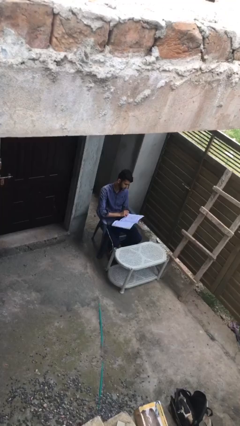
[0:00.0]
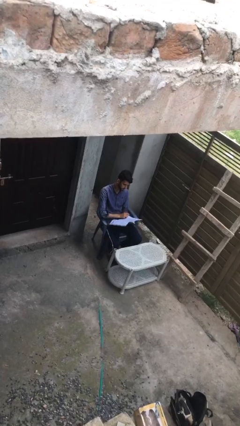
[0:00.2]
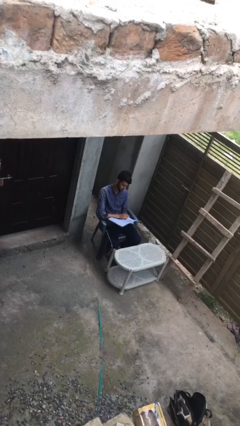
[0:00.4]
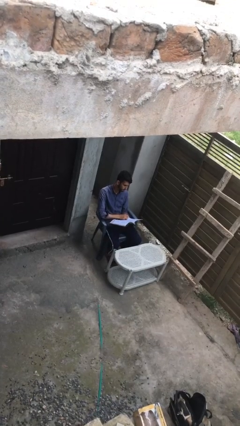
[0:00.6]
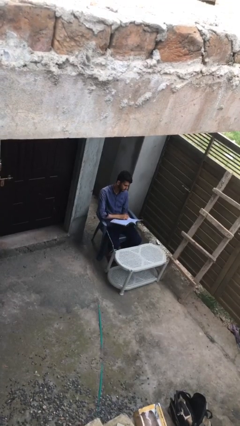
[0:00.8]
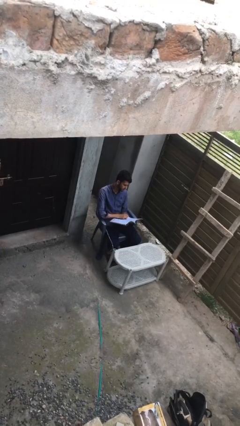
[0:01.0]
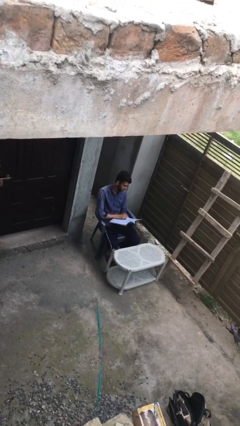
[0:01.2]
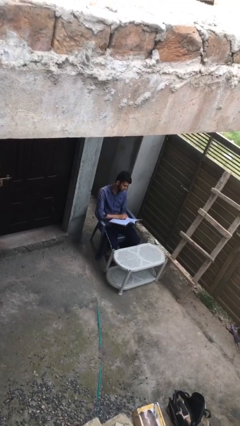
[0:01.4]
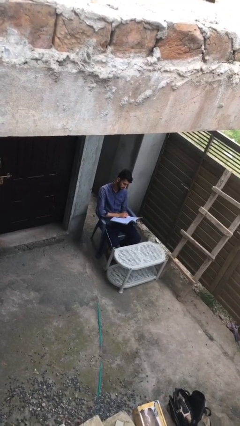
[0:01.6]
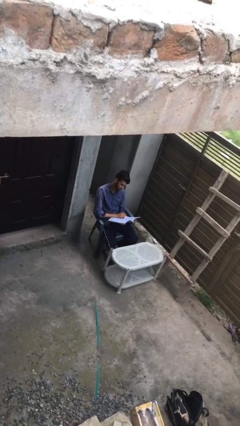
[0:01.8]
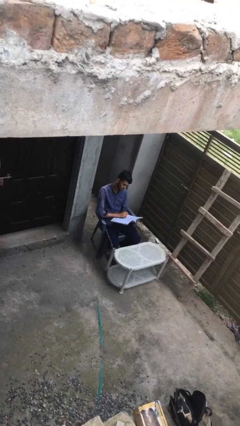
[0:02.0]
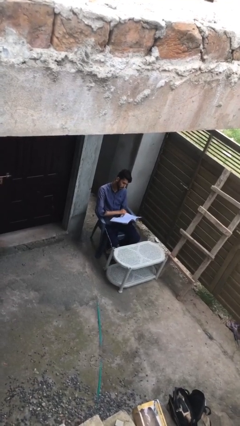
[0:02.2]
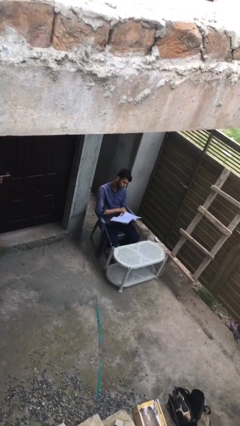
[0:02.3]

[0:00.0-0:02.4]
person reads document

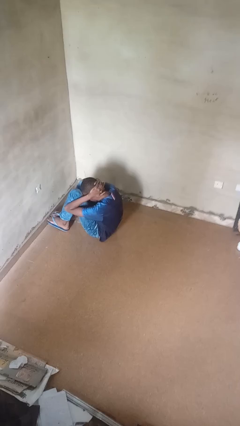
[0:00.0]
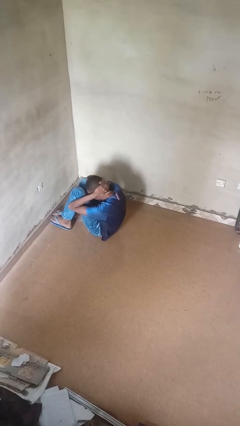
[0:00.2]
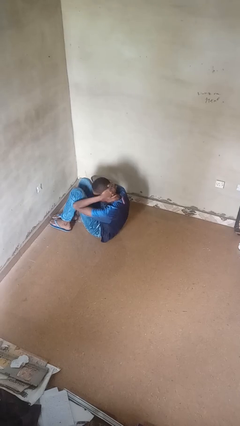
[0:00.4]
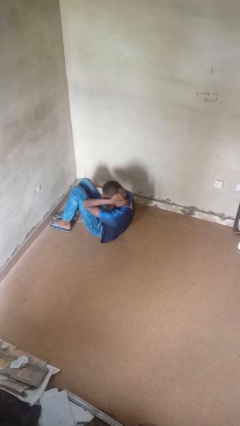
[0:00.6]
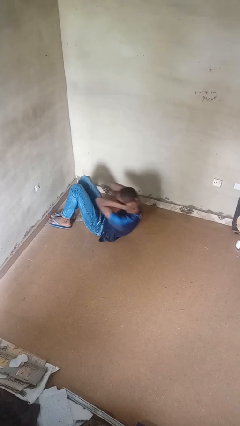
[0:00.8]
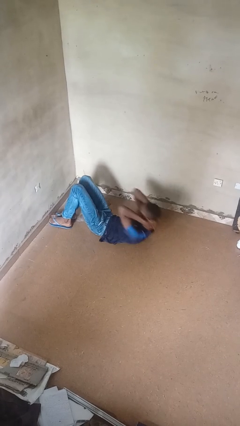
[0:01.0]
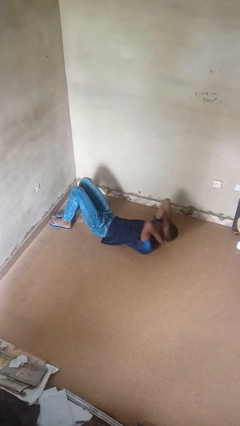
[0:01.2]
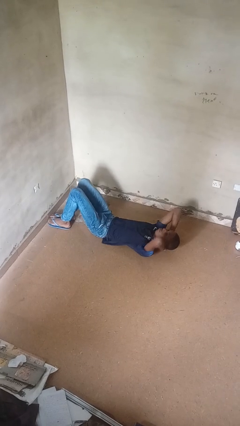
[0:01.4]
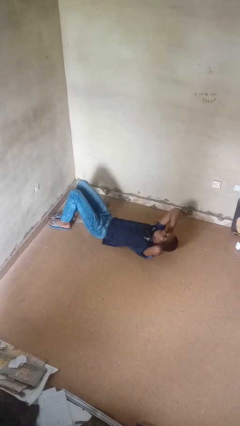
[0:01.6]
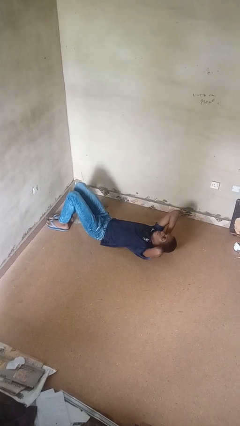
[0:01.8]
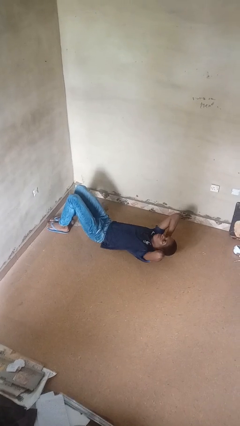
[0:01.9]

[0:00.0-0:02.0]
person exercises with situp

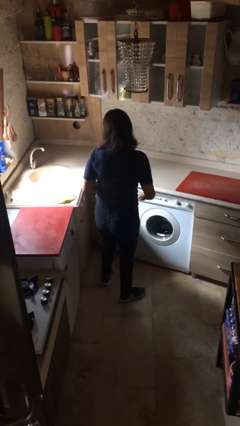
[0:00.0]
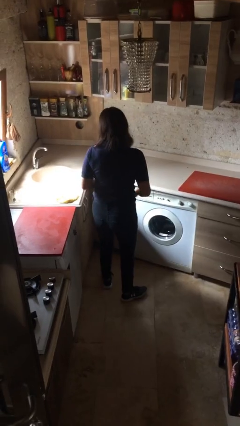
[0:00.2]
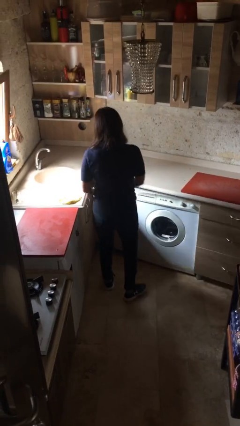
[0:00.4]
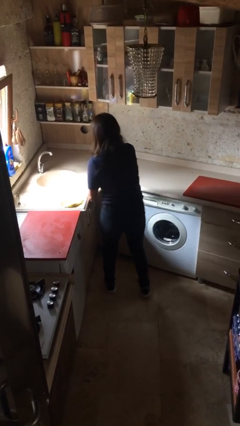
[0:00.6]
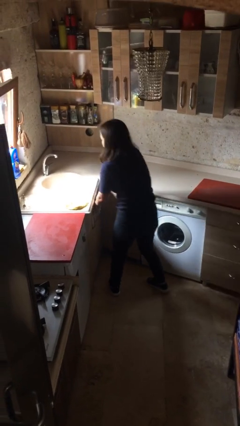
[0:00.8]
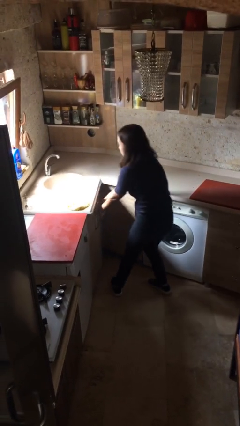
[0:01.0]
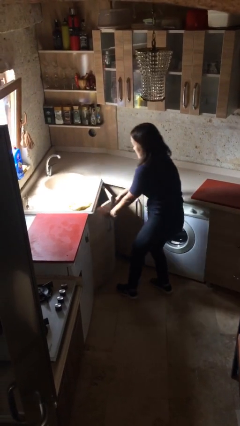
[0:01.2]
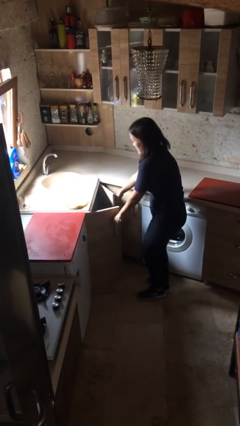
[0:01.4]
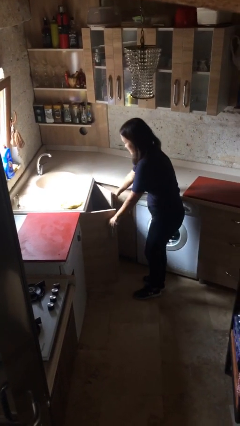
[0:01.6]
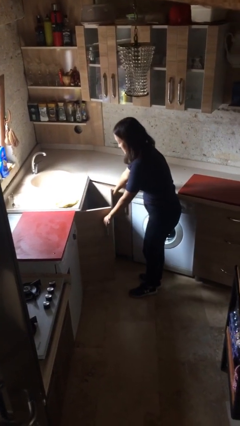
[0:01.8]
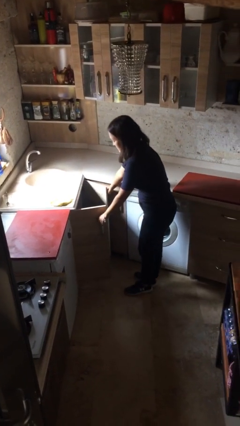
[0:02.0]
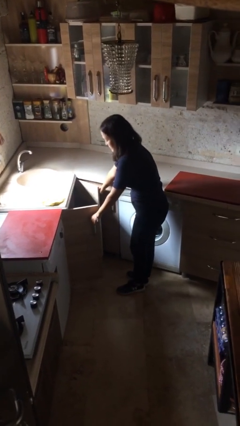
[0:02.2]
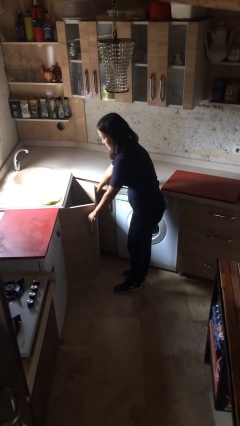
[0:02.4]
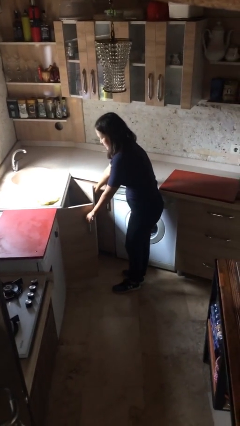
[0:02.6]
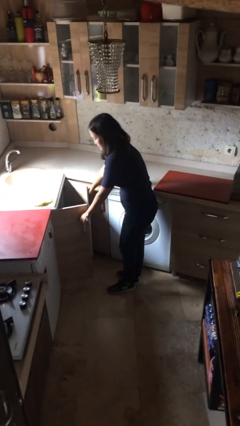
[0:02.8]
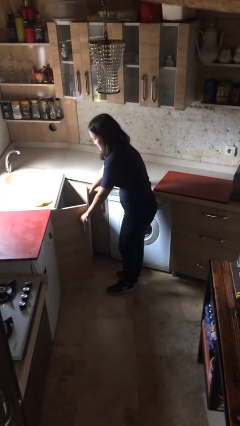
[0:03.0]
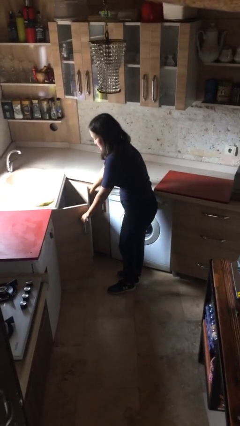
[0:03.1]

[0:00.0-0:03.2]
person opens cabinet

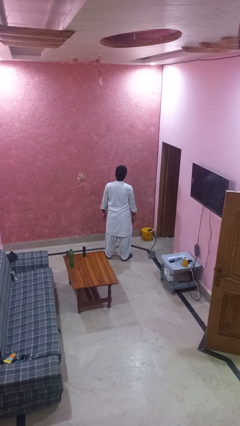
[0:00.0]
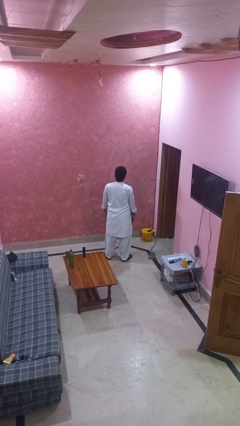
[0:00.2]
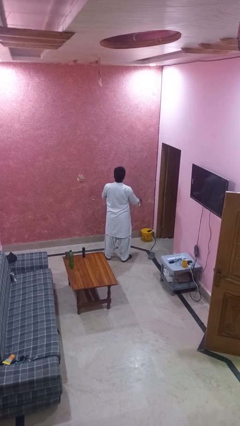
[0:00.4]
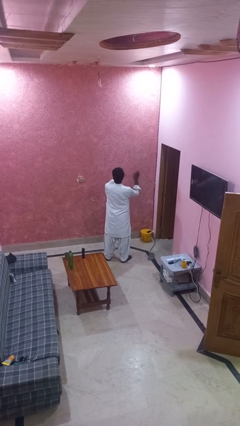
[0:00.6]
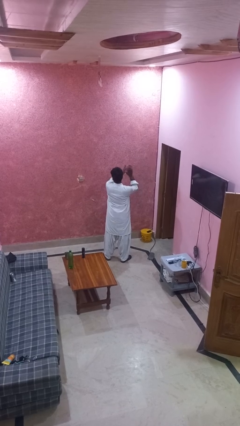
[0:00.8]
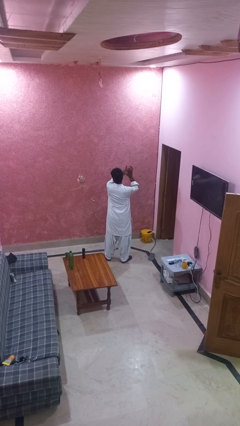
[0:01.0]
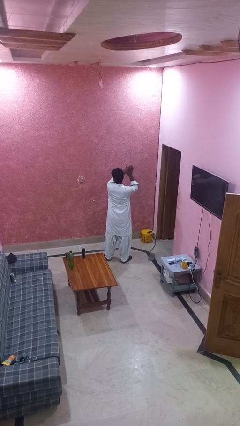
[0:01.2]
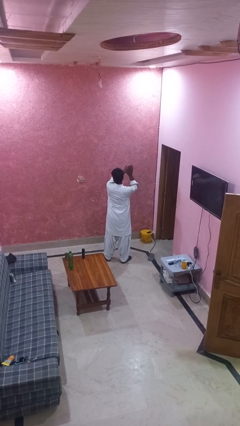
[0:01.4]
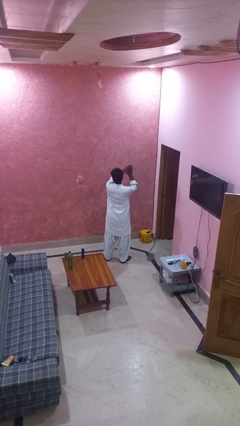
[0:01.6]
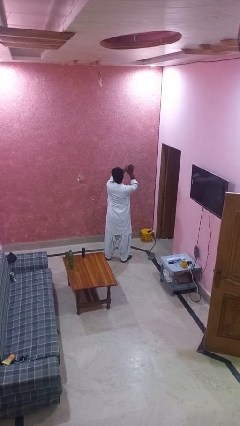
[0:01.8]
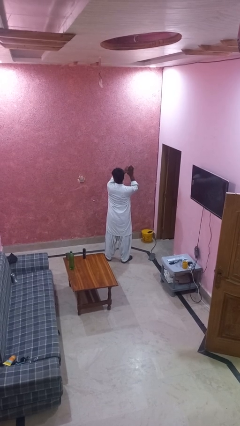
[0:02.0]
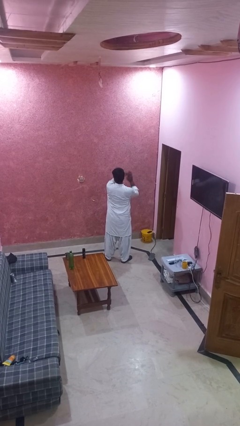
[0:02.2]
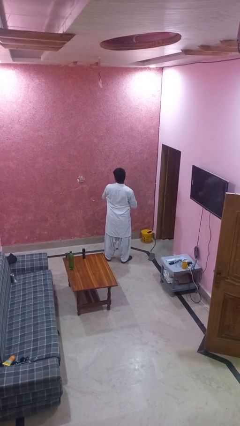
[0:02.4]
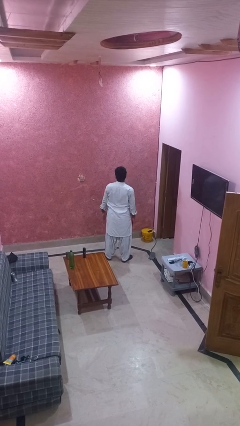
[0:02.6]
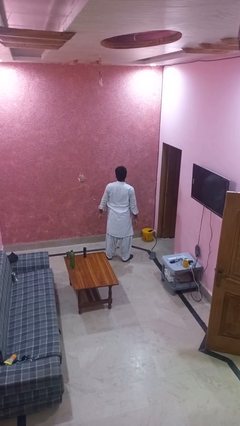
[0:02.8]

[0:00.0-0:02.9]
person claps hands

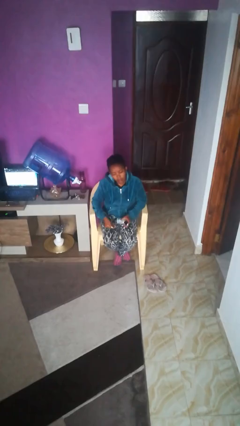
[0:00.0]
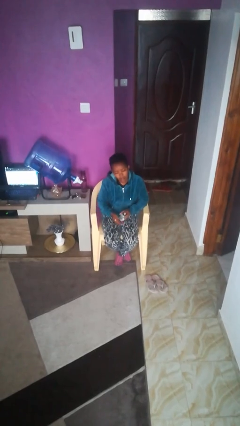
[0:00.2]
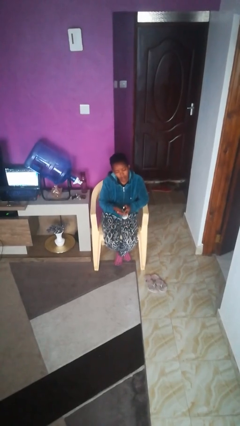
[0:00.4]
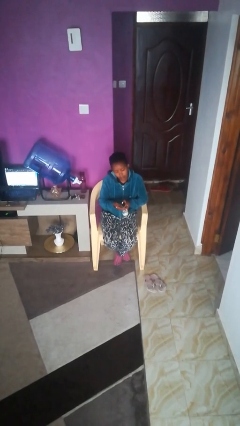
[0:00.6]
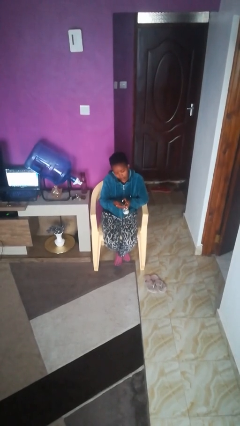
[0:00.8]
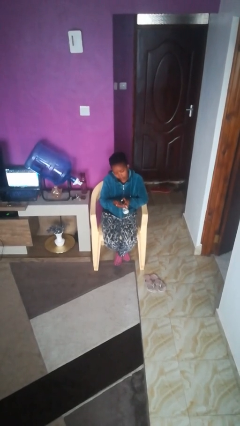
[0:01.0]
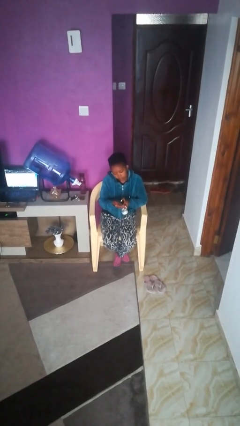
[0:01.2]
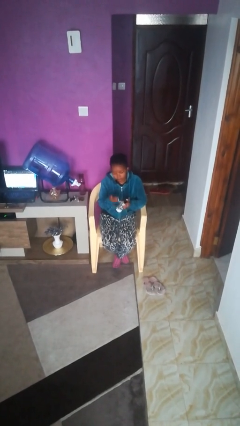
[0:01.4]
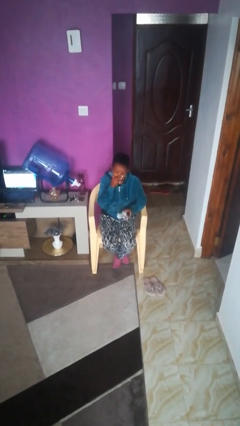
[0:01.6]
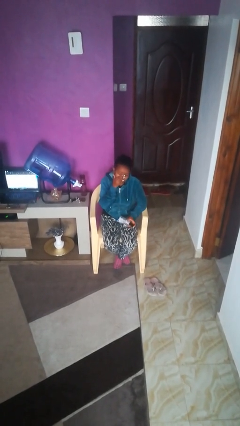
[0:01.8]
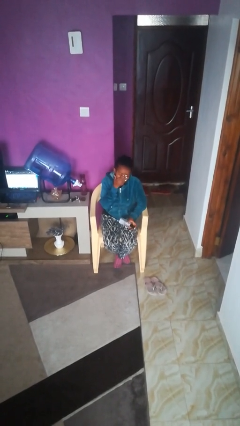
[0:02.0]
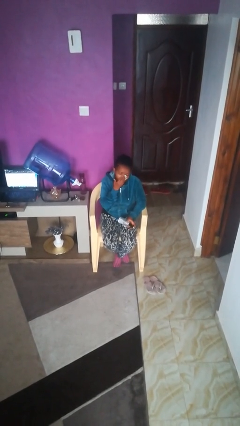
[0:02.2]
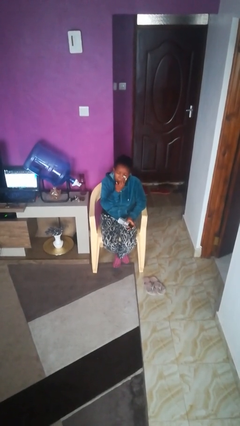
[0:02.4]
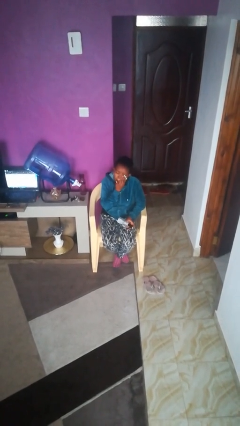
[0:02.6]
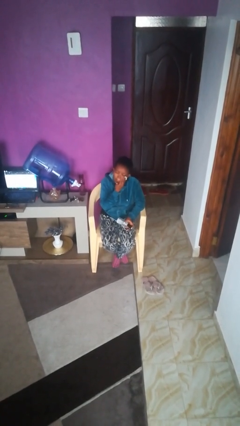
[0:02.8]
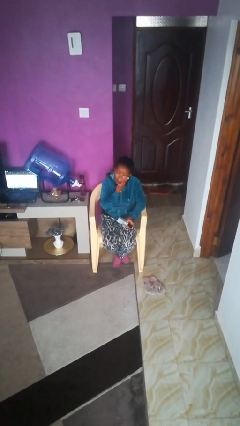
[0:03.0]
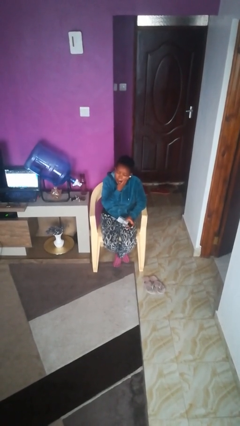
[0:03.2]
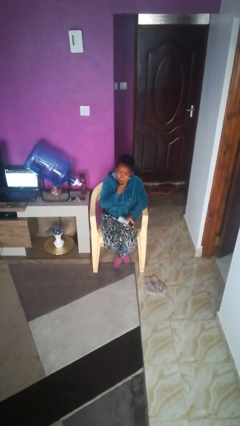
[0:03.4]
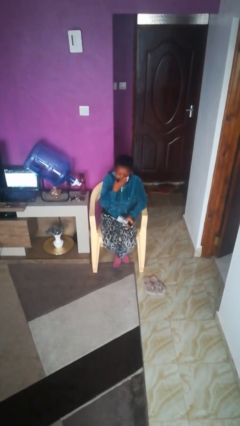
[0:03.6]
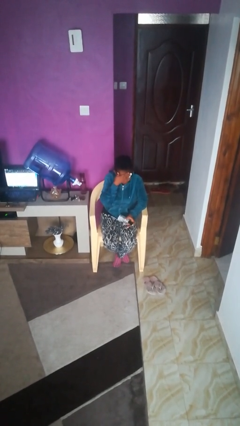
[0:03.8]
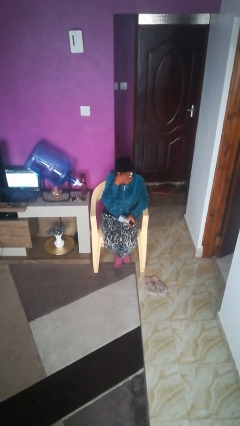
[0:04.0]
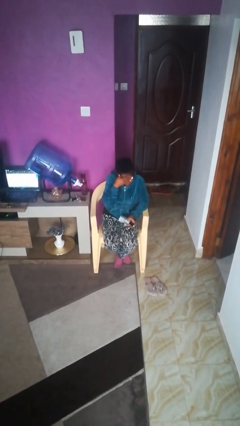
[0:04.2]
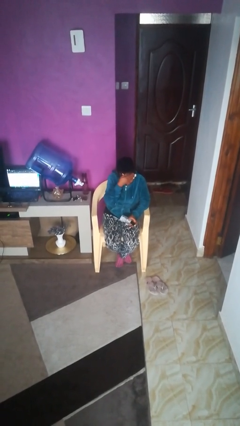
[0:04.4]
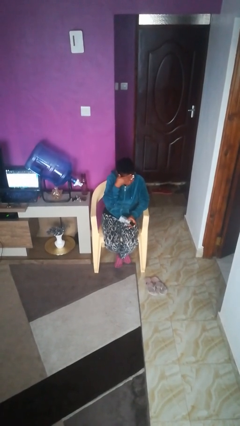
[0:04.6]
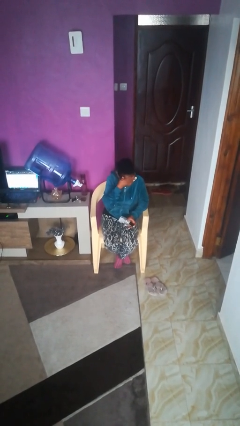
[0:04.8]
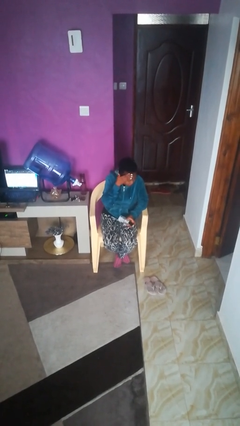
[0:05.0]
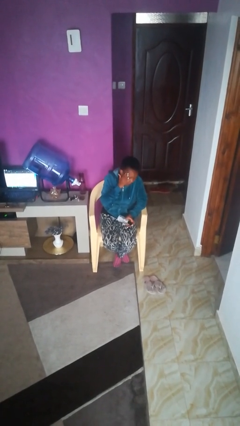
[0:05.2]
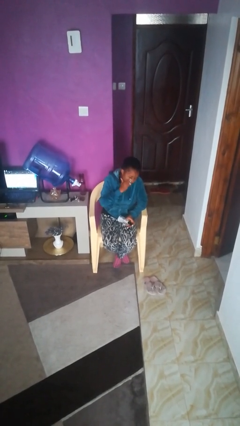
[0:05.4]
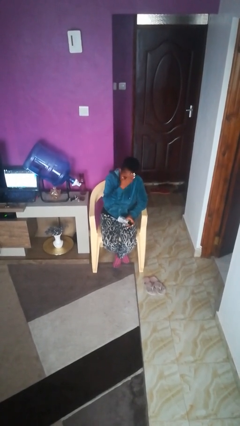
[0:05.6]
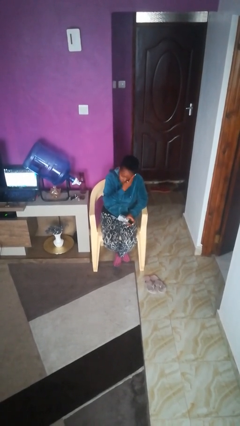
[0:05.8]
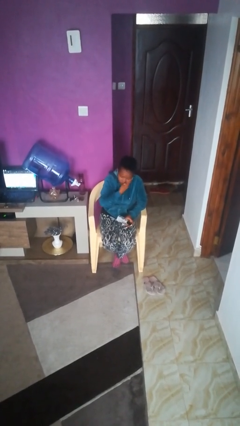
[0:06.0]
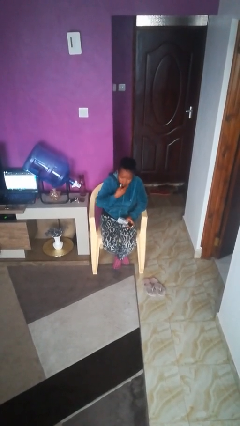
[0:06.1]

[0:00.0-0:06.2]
person applies facial moisturizer

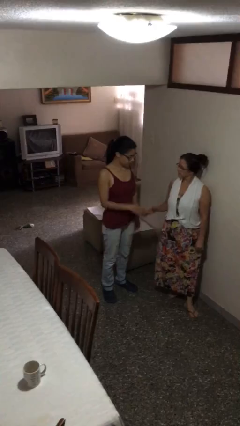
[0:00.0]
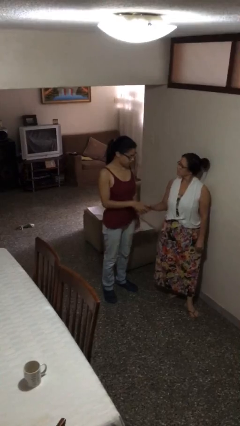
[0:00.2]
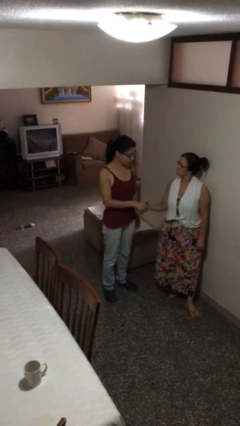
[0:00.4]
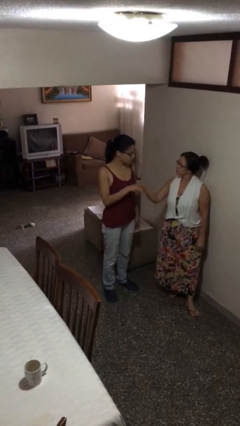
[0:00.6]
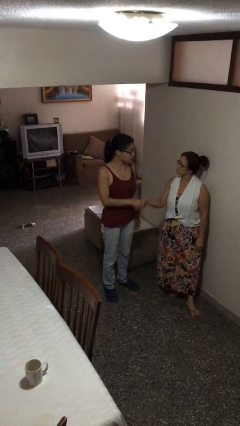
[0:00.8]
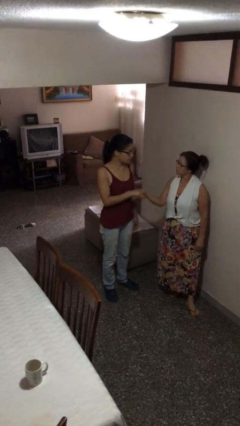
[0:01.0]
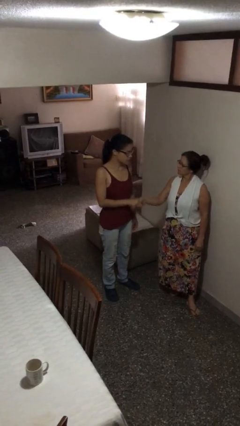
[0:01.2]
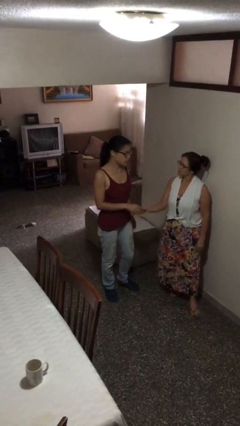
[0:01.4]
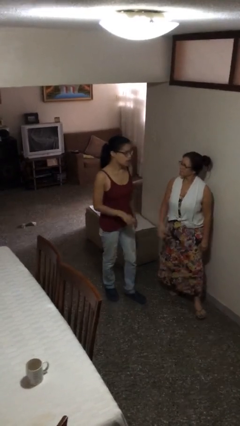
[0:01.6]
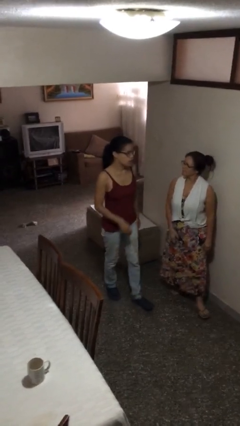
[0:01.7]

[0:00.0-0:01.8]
person shakes hand
